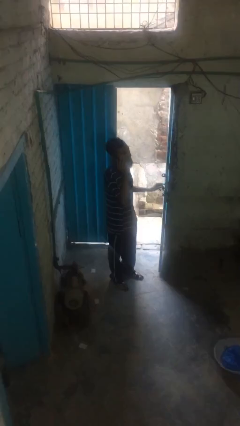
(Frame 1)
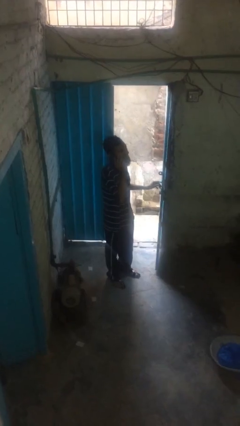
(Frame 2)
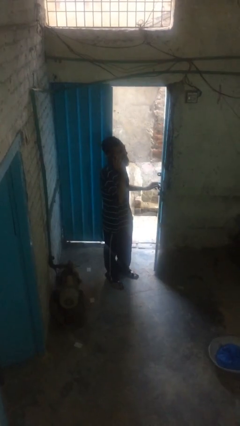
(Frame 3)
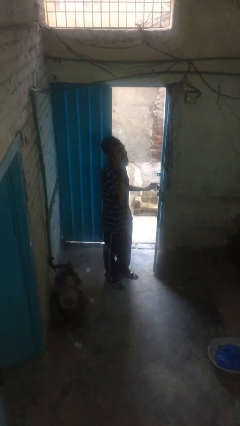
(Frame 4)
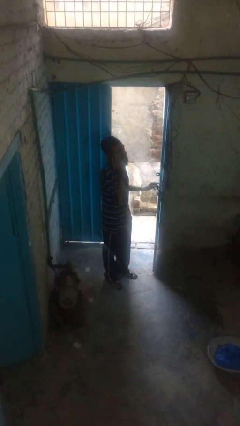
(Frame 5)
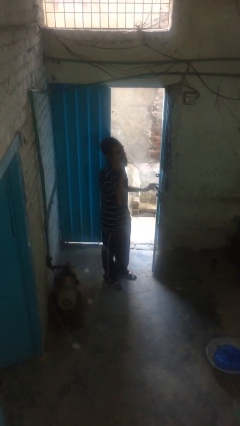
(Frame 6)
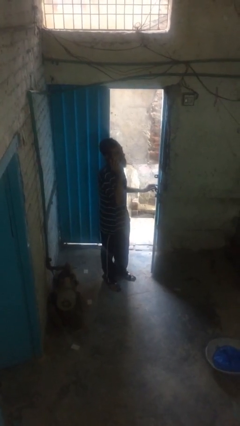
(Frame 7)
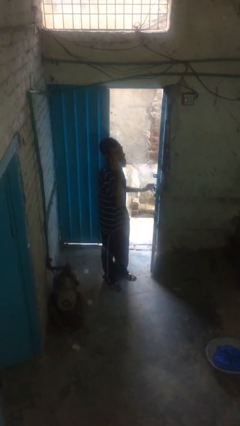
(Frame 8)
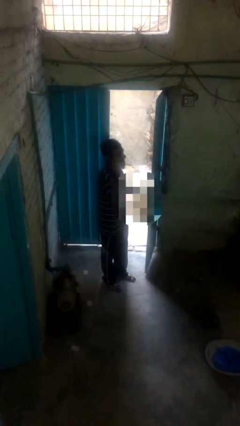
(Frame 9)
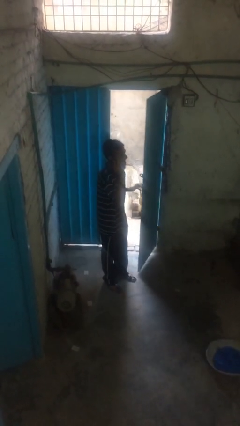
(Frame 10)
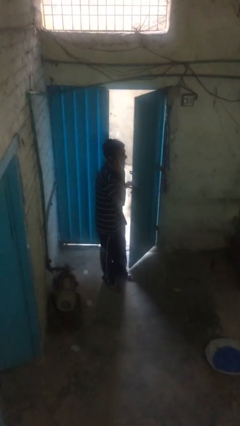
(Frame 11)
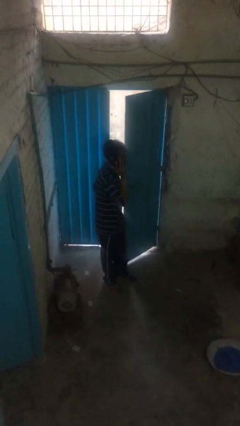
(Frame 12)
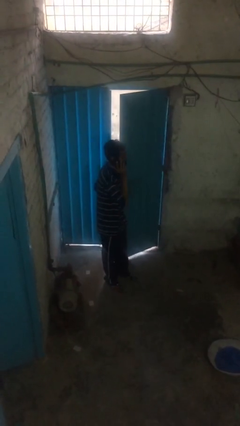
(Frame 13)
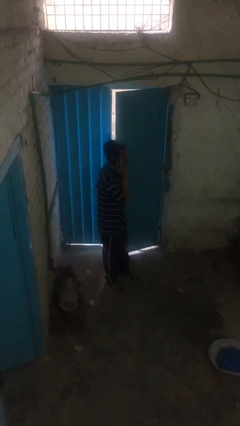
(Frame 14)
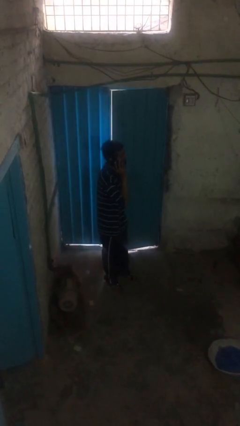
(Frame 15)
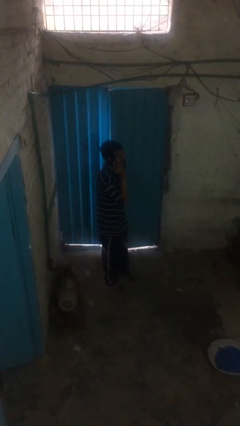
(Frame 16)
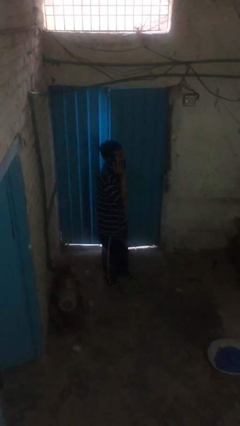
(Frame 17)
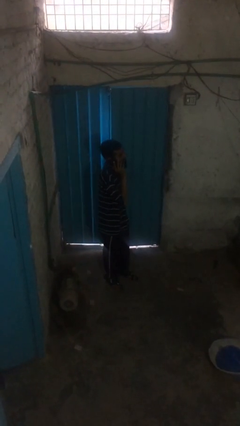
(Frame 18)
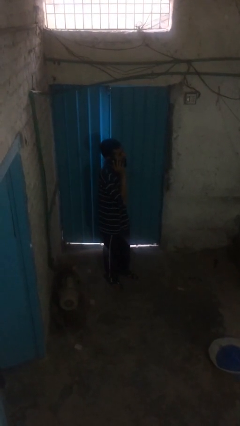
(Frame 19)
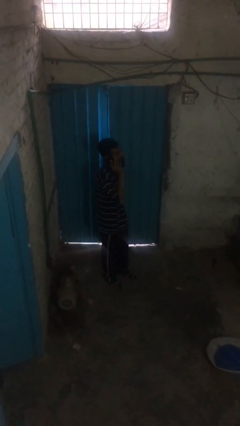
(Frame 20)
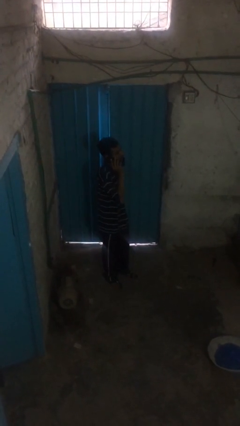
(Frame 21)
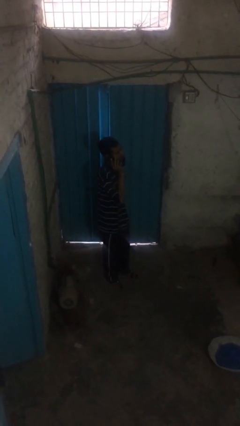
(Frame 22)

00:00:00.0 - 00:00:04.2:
person closes facility door

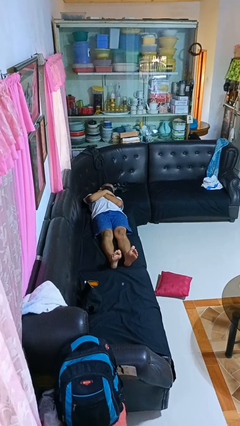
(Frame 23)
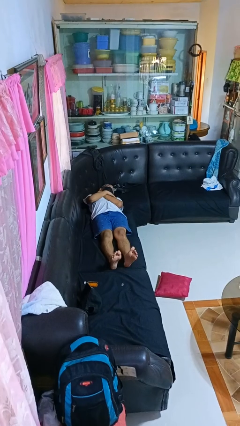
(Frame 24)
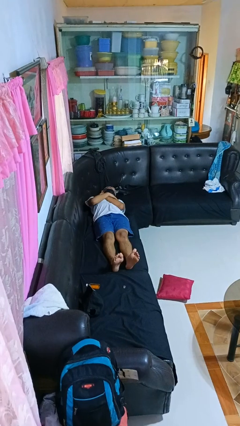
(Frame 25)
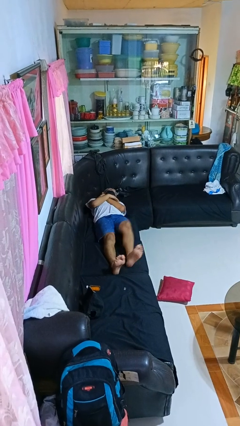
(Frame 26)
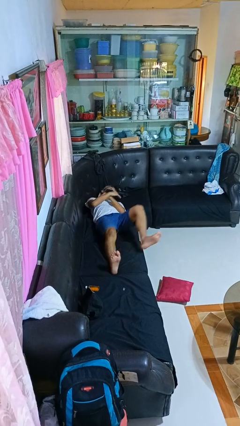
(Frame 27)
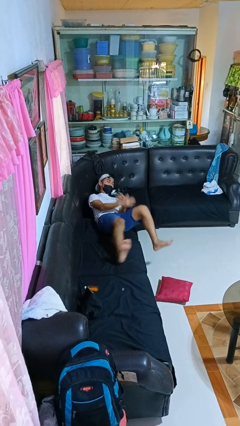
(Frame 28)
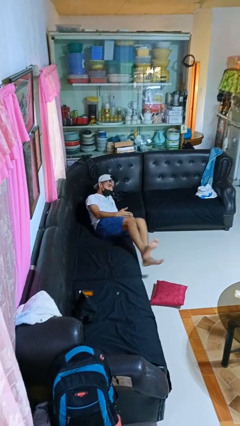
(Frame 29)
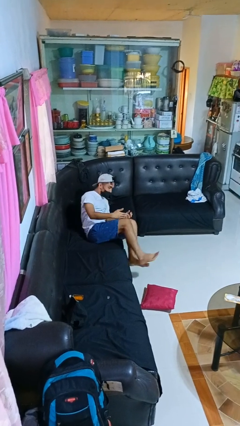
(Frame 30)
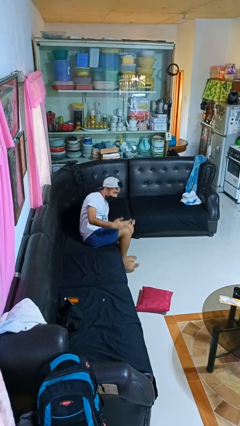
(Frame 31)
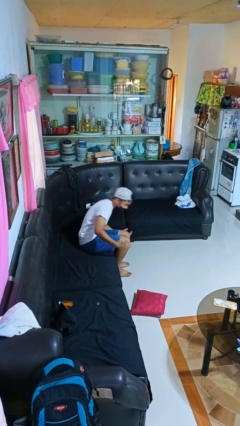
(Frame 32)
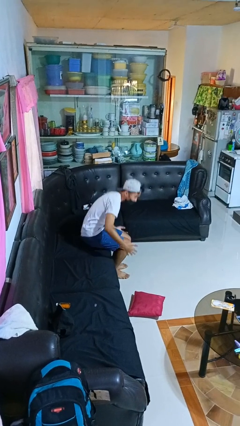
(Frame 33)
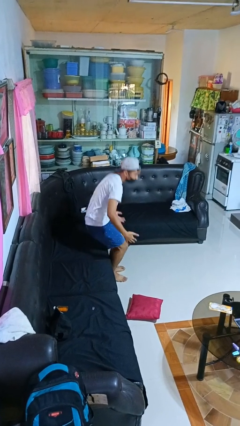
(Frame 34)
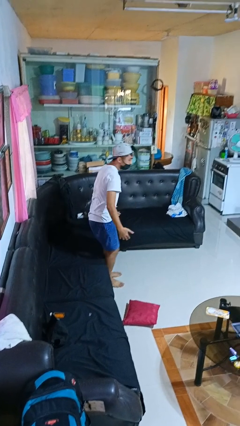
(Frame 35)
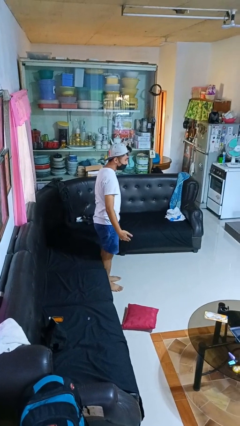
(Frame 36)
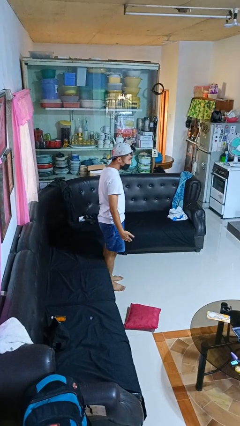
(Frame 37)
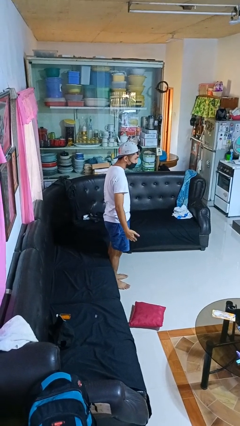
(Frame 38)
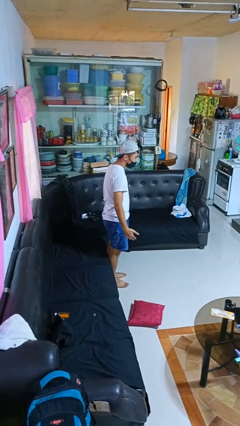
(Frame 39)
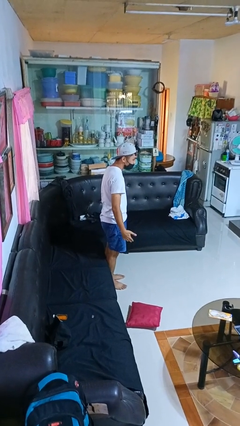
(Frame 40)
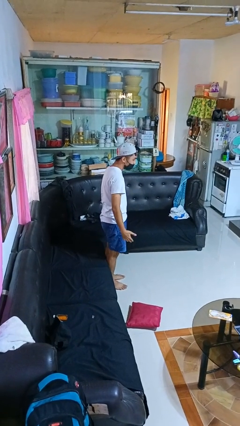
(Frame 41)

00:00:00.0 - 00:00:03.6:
person stands up

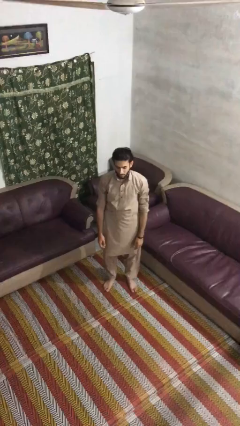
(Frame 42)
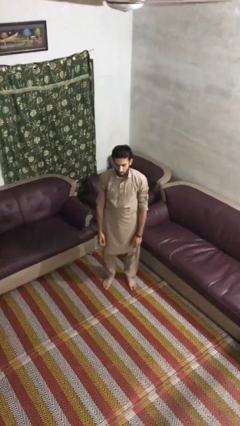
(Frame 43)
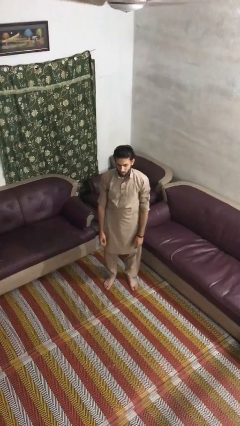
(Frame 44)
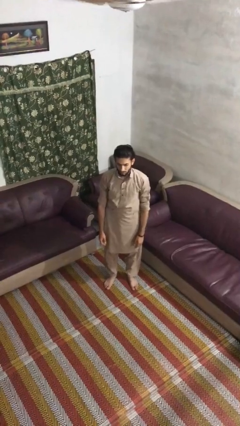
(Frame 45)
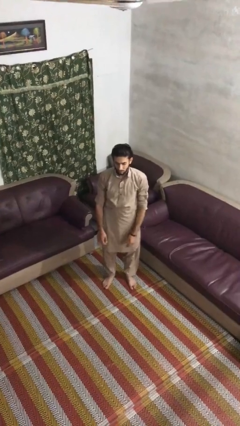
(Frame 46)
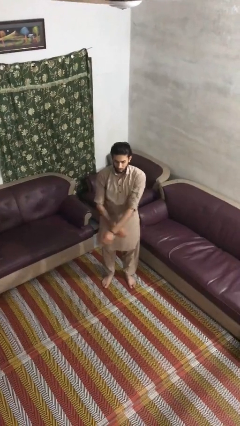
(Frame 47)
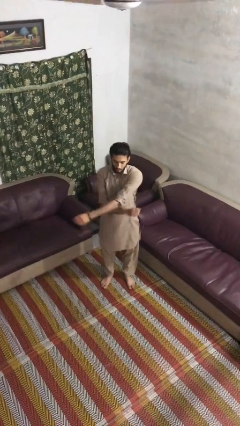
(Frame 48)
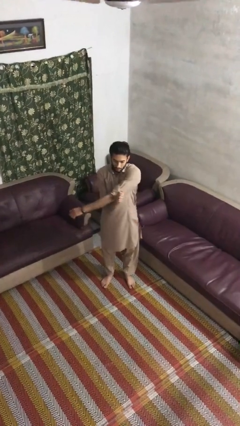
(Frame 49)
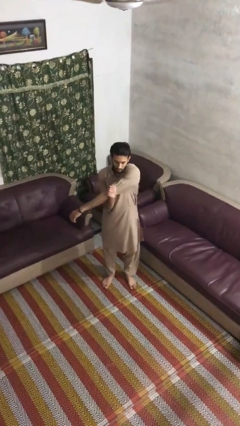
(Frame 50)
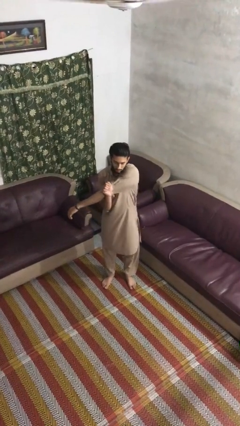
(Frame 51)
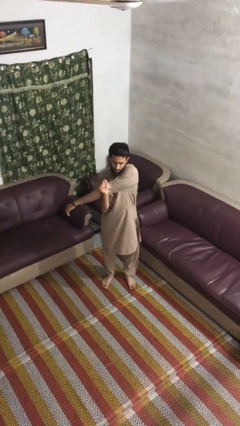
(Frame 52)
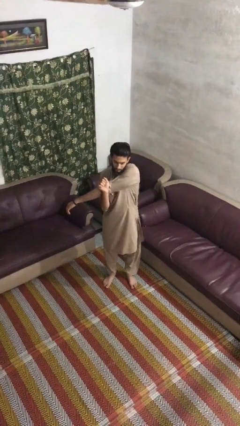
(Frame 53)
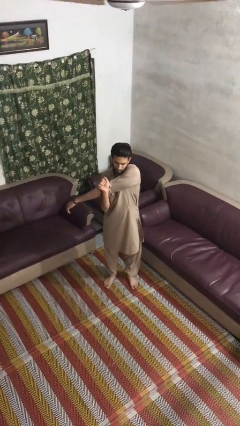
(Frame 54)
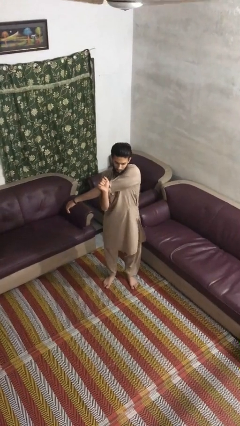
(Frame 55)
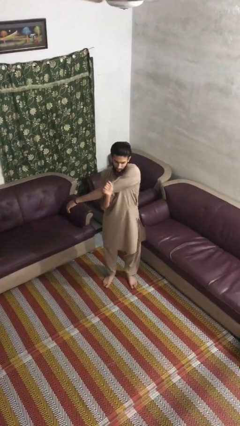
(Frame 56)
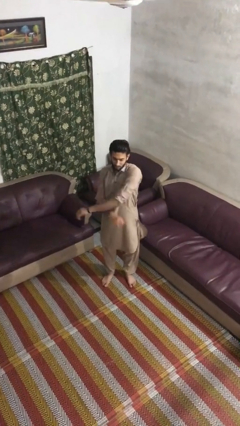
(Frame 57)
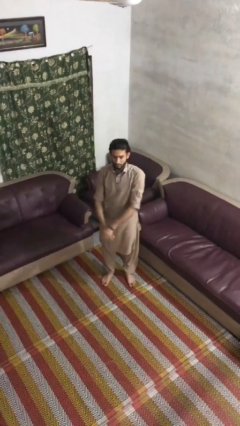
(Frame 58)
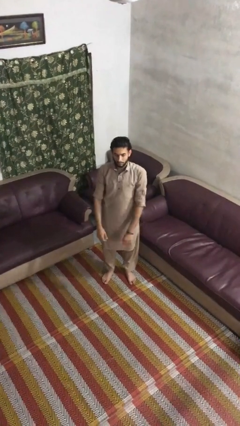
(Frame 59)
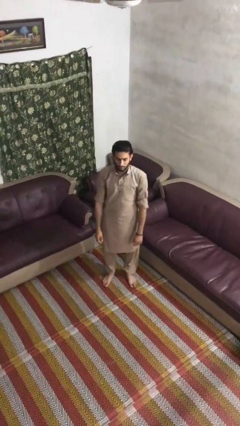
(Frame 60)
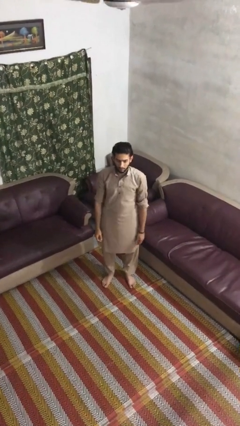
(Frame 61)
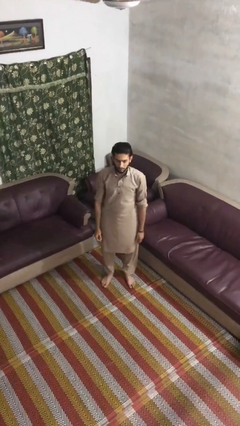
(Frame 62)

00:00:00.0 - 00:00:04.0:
person stretches arms to side

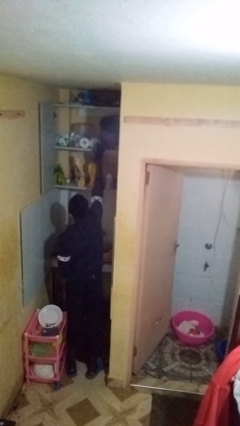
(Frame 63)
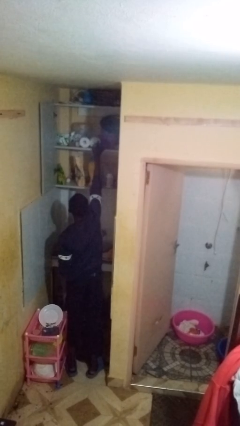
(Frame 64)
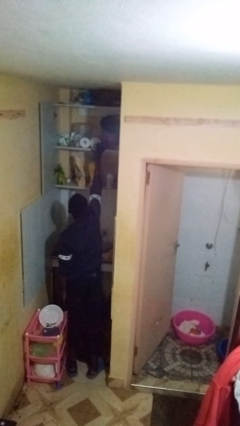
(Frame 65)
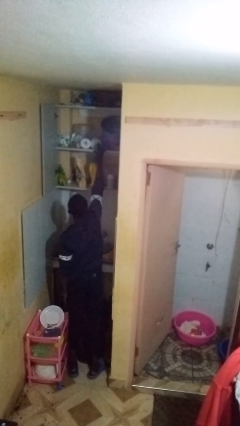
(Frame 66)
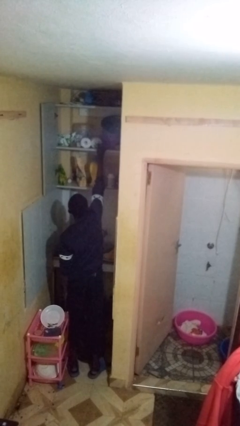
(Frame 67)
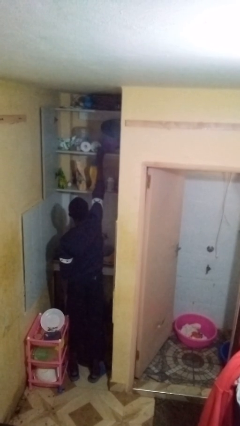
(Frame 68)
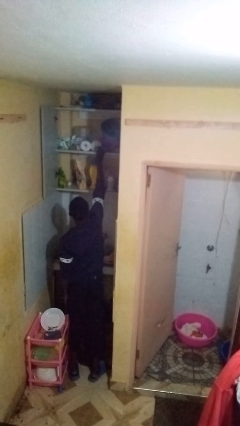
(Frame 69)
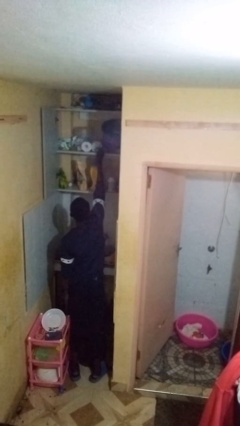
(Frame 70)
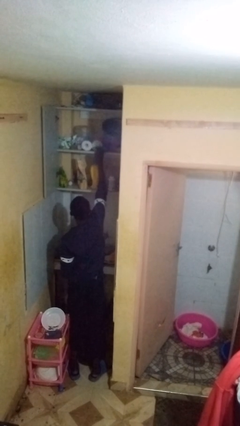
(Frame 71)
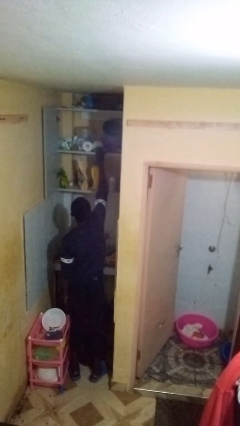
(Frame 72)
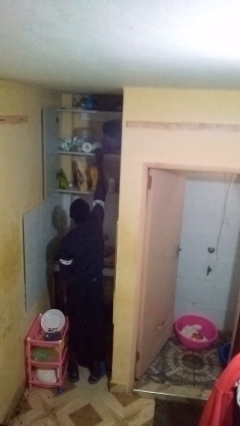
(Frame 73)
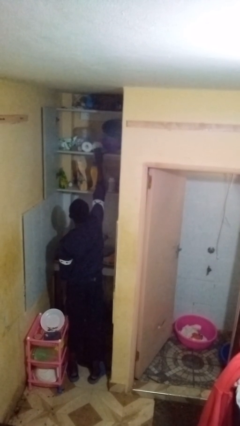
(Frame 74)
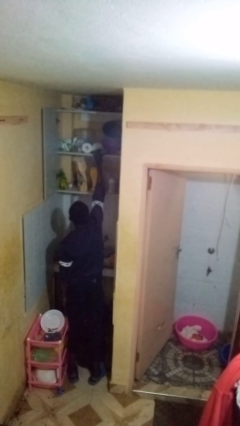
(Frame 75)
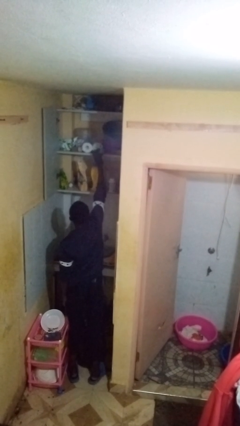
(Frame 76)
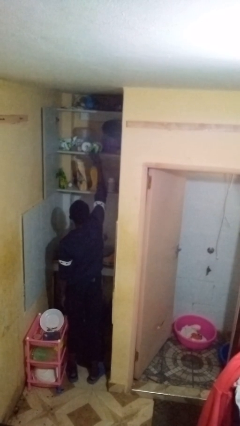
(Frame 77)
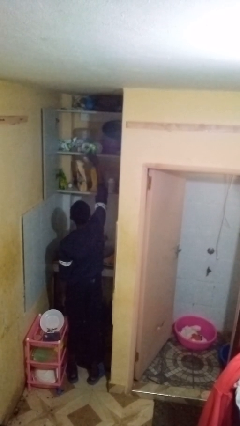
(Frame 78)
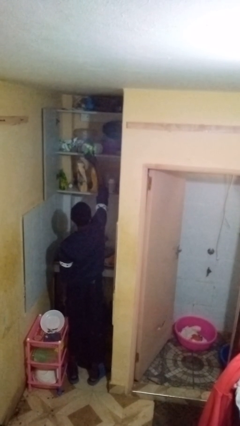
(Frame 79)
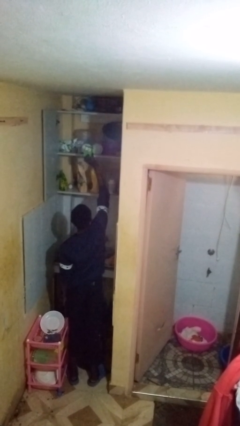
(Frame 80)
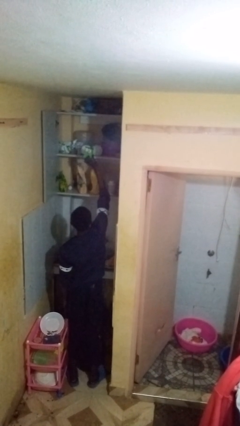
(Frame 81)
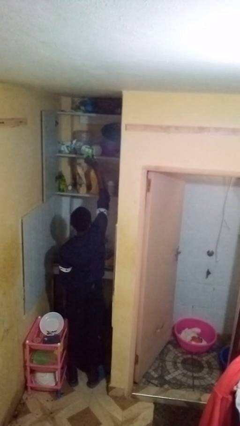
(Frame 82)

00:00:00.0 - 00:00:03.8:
person takes object from cabinet

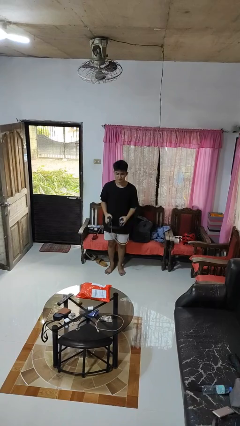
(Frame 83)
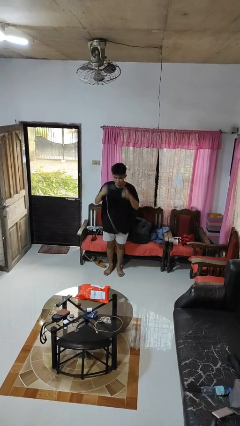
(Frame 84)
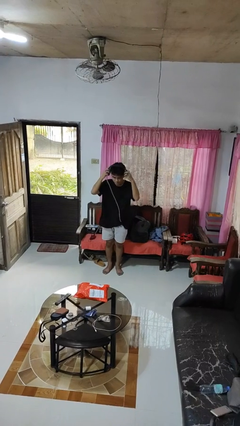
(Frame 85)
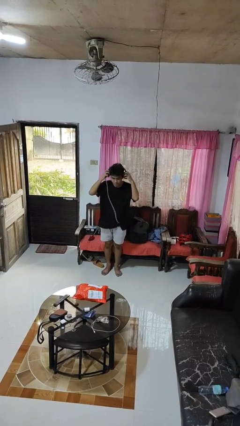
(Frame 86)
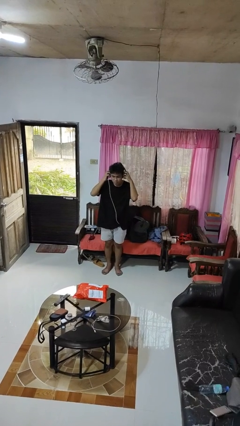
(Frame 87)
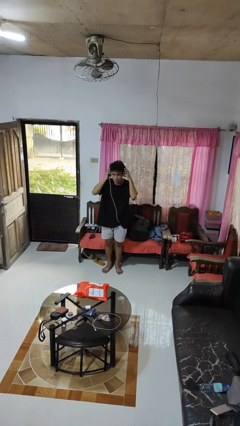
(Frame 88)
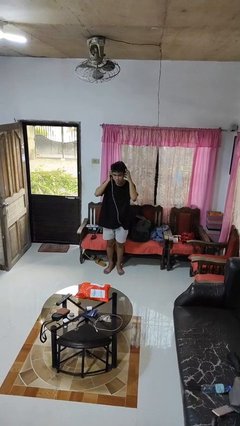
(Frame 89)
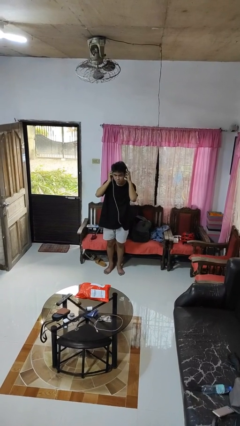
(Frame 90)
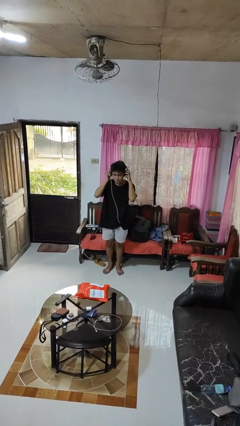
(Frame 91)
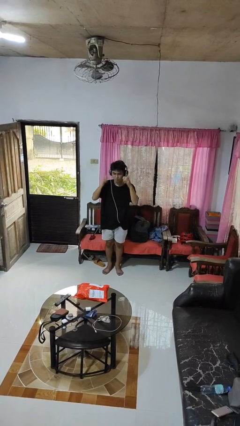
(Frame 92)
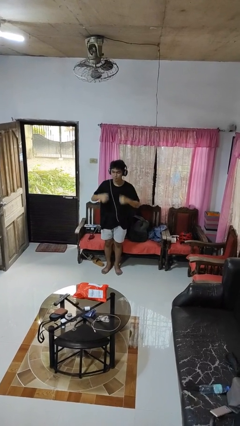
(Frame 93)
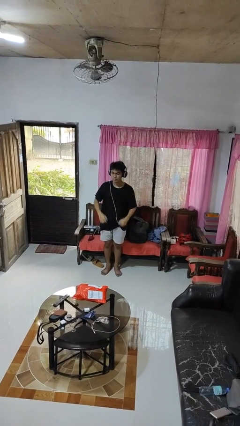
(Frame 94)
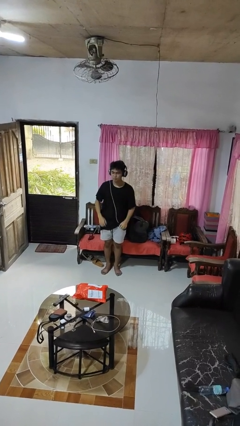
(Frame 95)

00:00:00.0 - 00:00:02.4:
person puts on headphones
